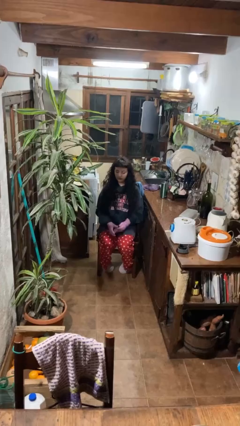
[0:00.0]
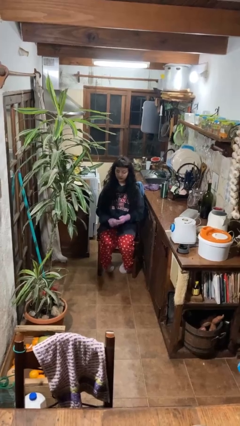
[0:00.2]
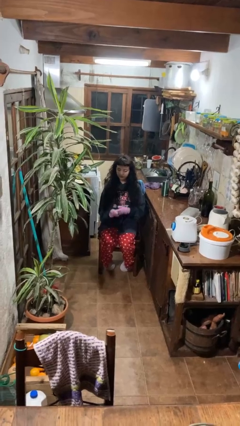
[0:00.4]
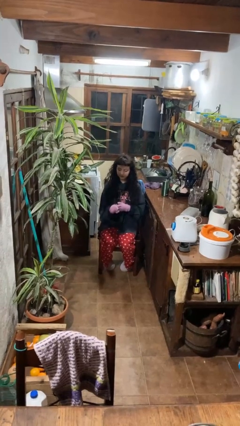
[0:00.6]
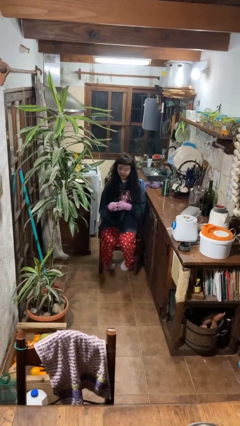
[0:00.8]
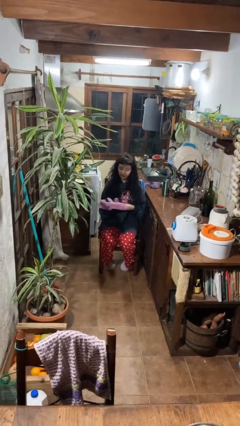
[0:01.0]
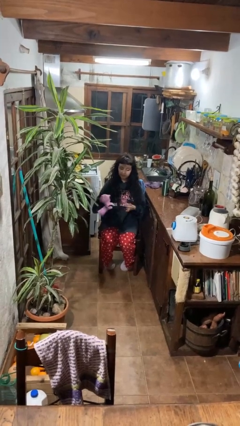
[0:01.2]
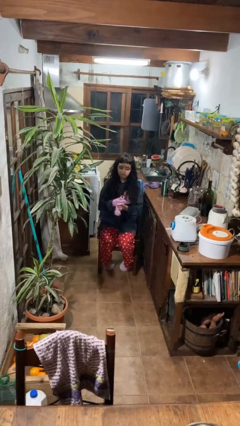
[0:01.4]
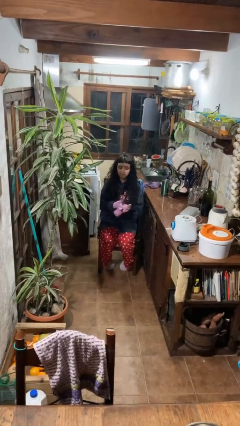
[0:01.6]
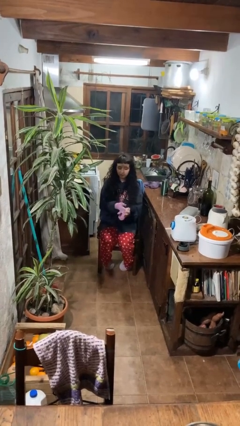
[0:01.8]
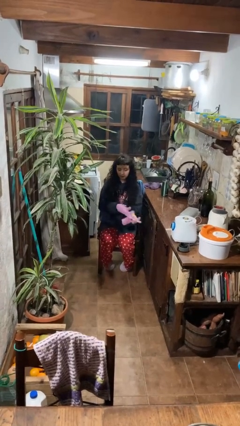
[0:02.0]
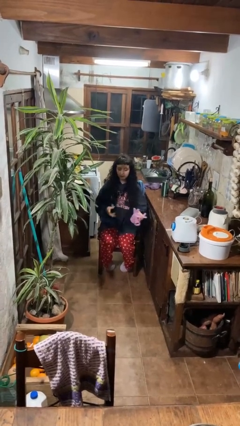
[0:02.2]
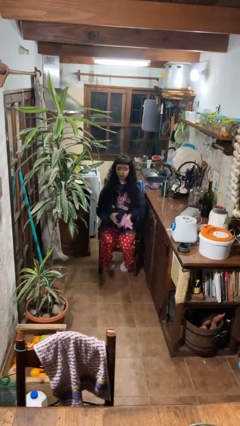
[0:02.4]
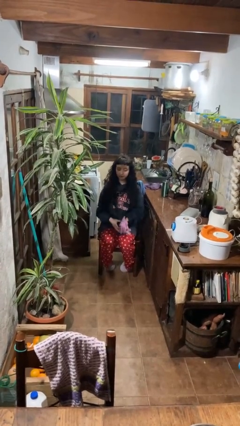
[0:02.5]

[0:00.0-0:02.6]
person takes off gloves

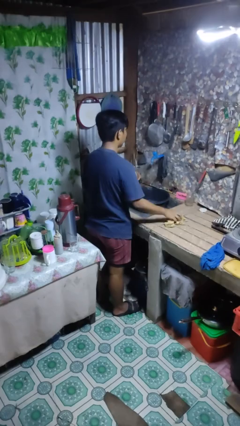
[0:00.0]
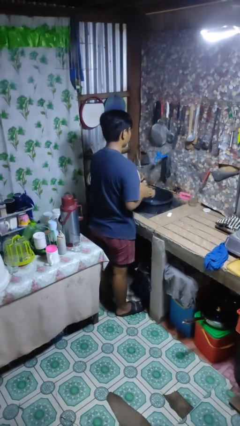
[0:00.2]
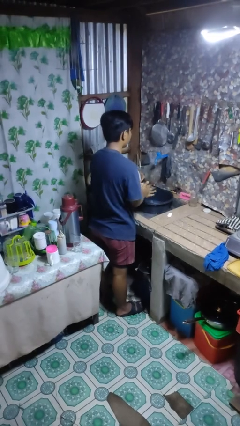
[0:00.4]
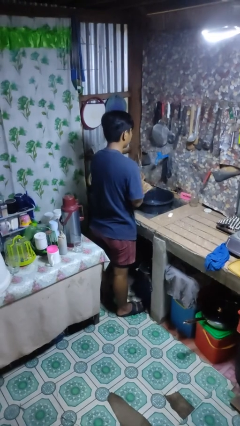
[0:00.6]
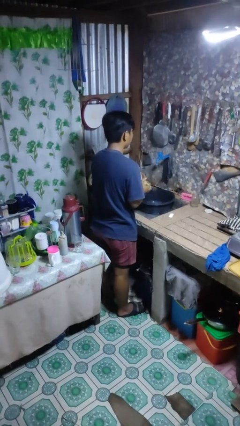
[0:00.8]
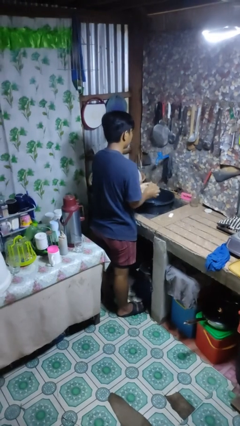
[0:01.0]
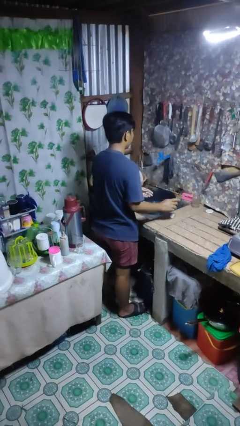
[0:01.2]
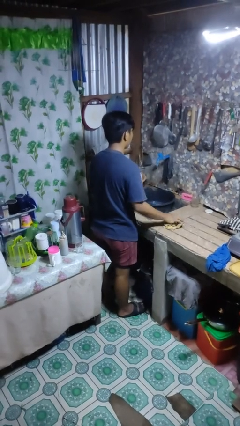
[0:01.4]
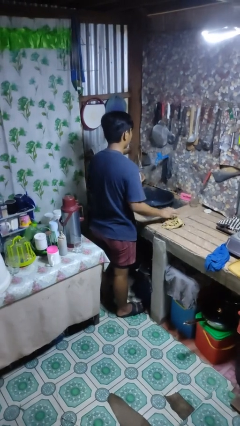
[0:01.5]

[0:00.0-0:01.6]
person dries hands with towel

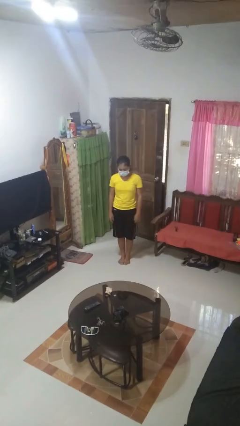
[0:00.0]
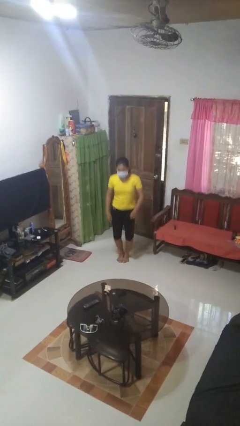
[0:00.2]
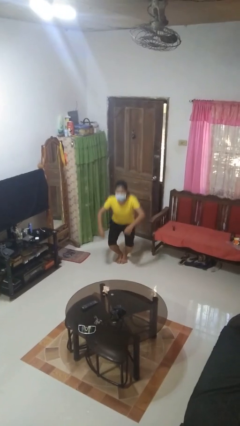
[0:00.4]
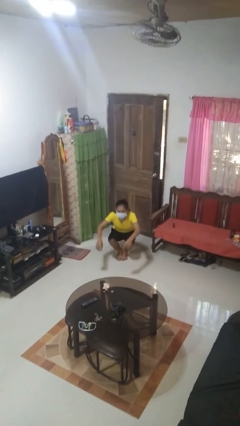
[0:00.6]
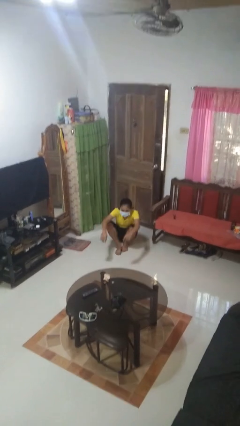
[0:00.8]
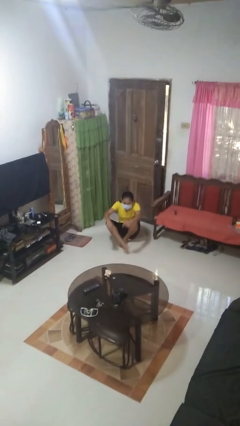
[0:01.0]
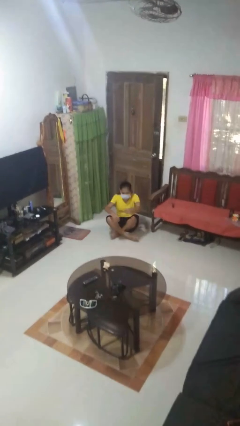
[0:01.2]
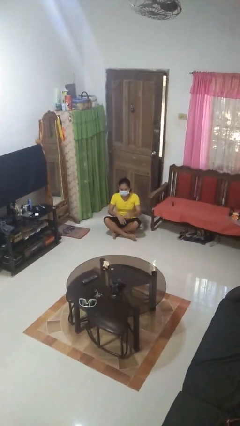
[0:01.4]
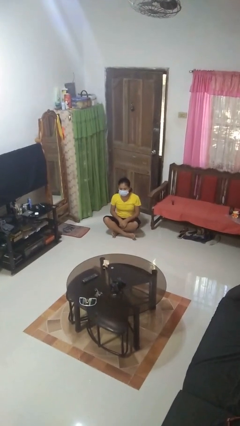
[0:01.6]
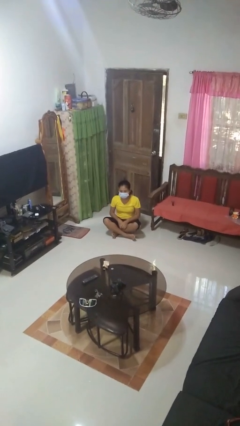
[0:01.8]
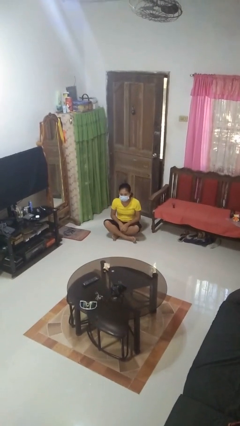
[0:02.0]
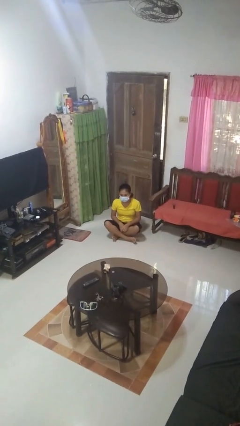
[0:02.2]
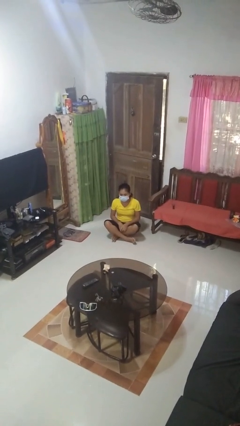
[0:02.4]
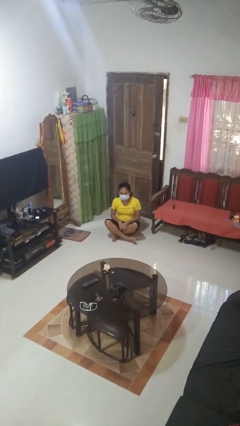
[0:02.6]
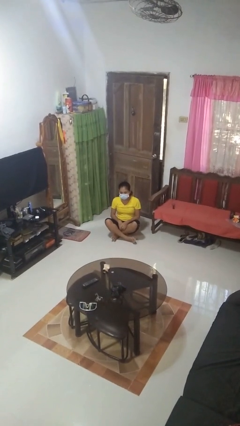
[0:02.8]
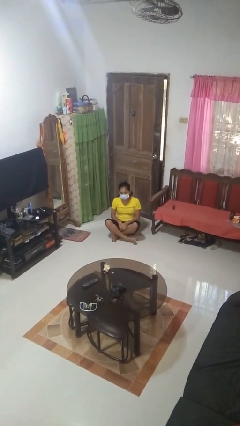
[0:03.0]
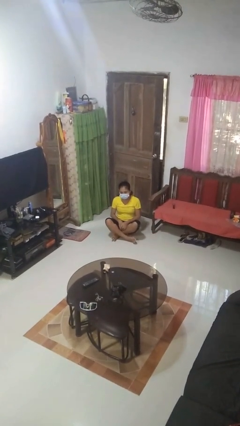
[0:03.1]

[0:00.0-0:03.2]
person sits crisscross

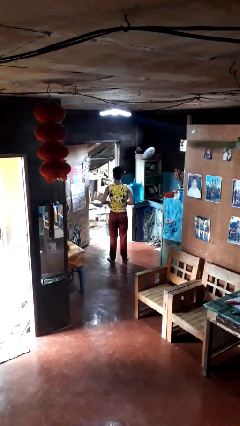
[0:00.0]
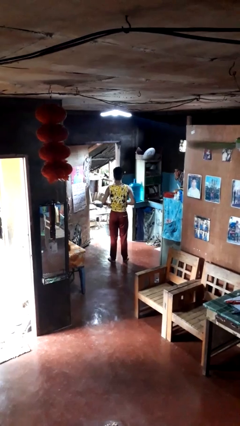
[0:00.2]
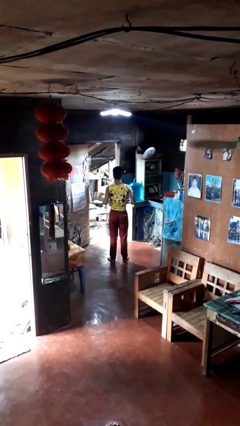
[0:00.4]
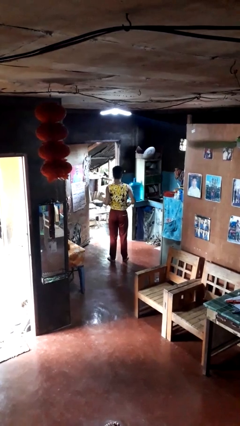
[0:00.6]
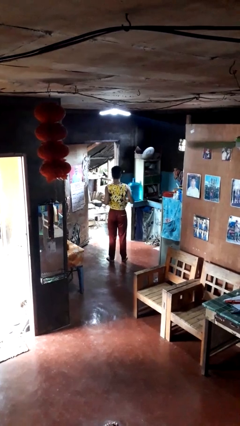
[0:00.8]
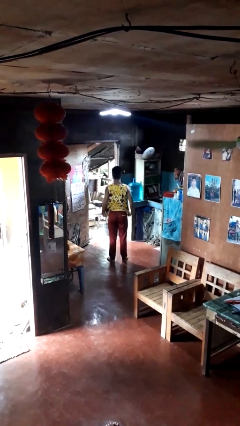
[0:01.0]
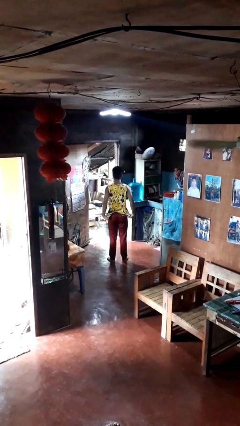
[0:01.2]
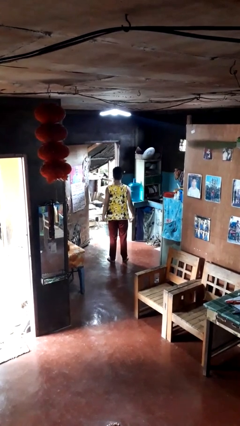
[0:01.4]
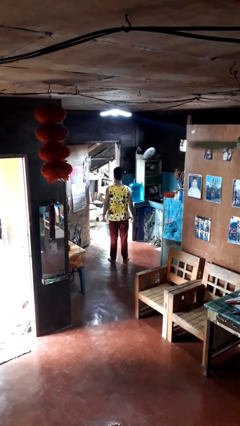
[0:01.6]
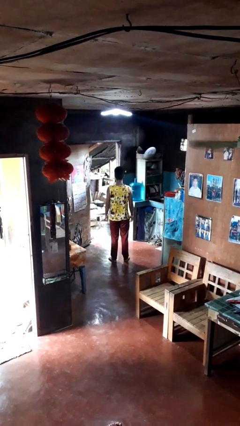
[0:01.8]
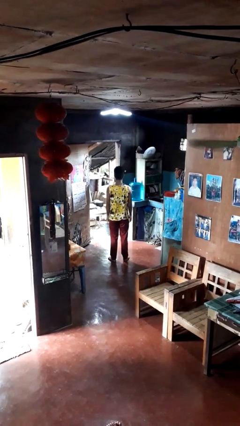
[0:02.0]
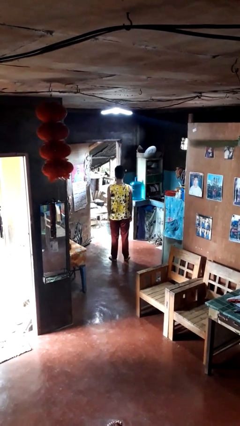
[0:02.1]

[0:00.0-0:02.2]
person untucks shirt

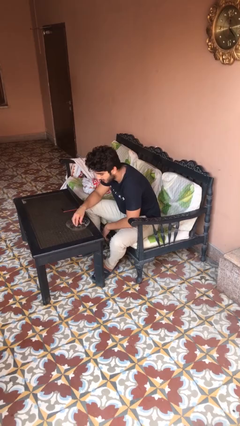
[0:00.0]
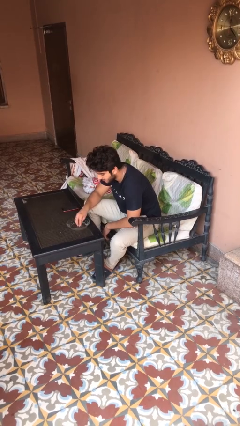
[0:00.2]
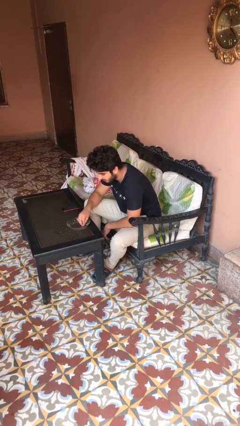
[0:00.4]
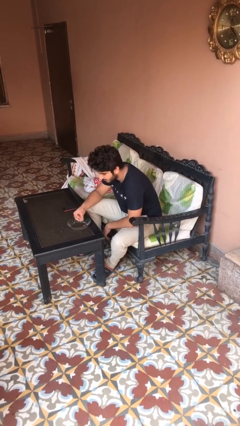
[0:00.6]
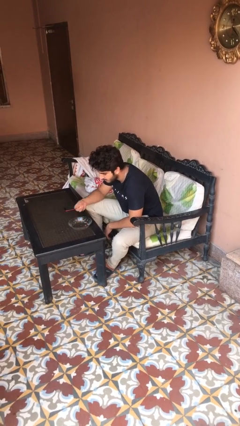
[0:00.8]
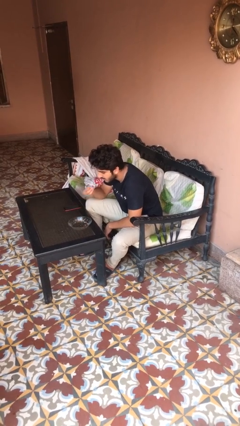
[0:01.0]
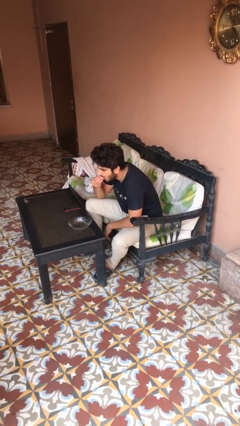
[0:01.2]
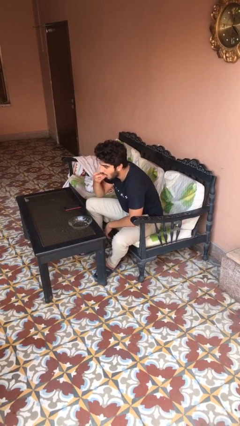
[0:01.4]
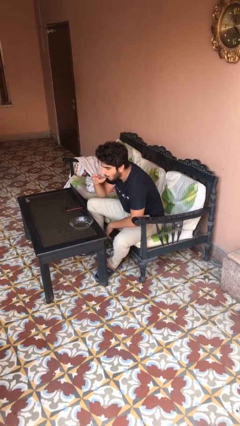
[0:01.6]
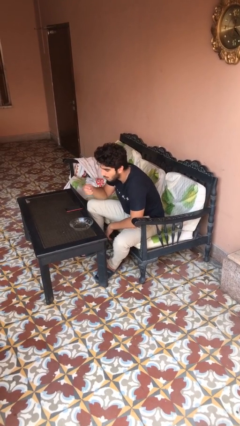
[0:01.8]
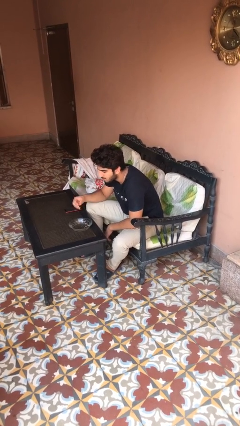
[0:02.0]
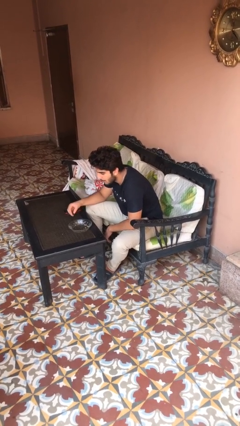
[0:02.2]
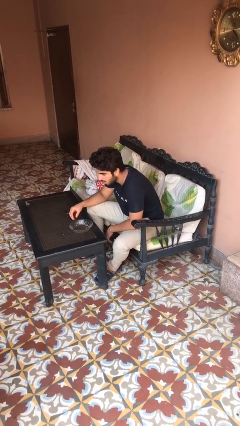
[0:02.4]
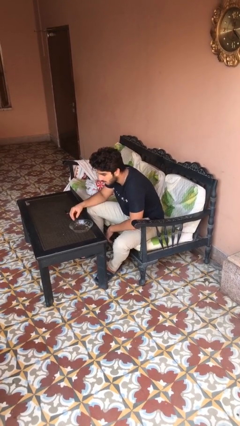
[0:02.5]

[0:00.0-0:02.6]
person eats with hands

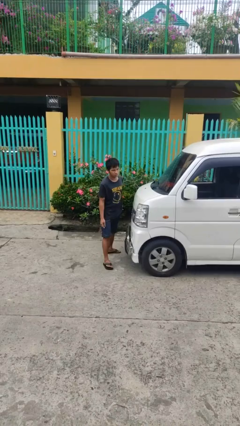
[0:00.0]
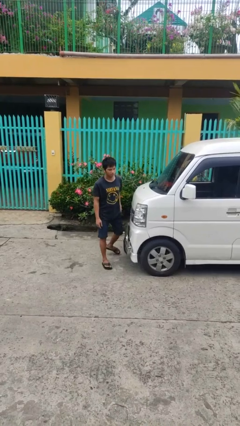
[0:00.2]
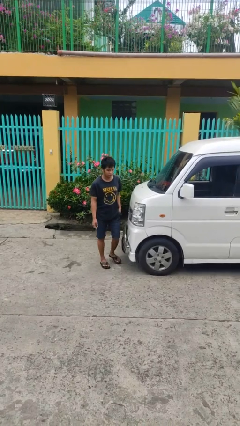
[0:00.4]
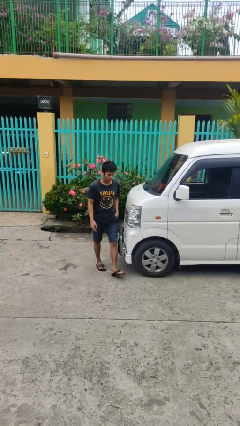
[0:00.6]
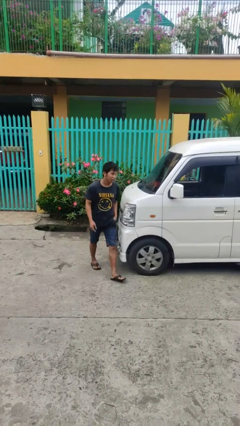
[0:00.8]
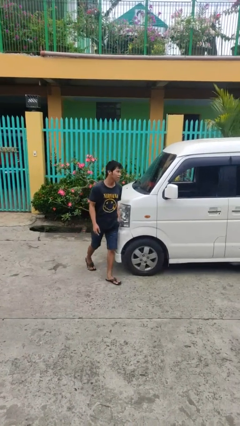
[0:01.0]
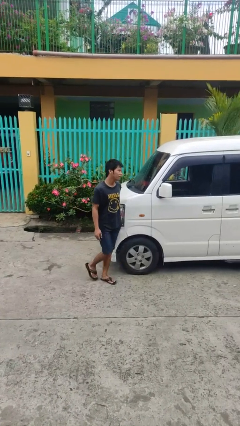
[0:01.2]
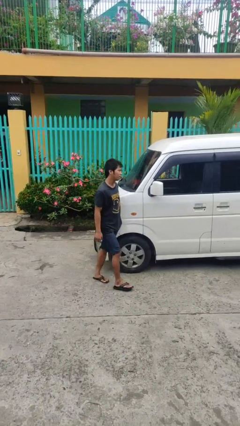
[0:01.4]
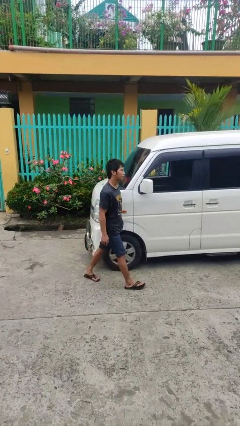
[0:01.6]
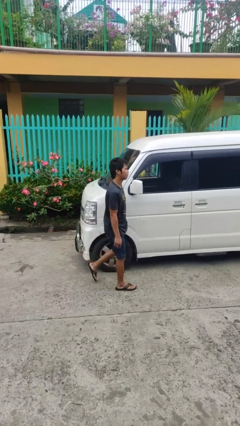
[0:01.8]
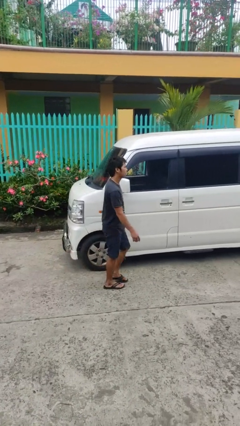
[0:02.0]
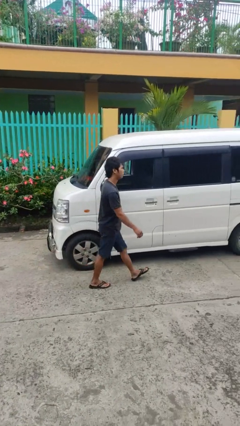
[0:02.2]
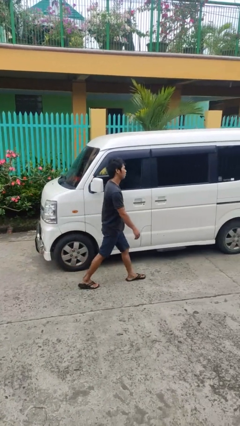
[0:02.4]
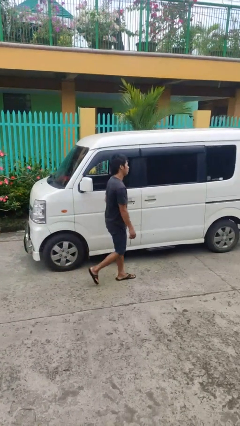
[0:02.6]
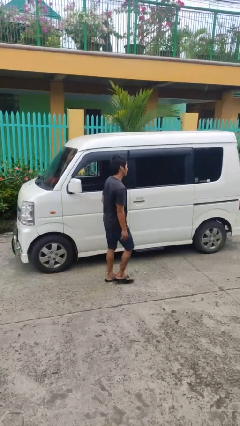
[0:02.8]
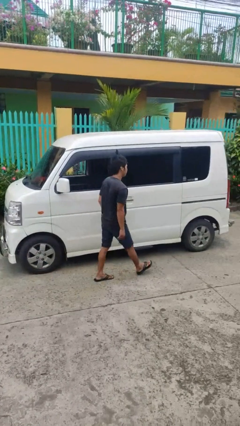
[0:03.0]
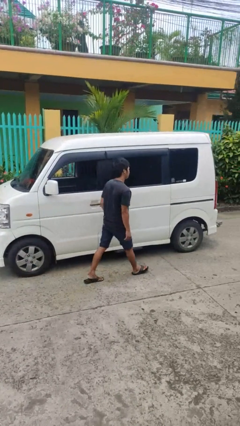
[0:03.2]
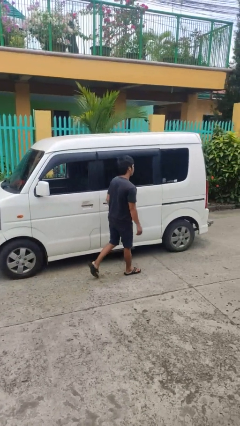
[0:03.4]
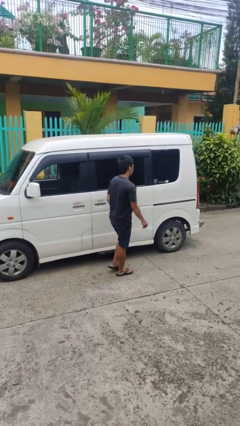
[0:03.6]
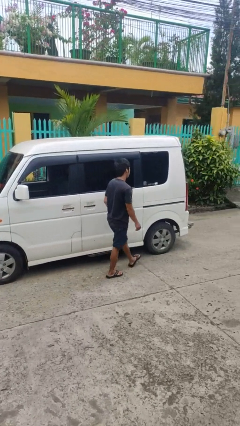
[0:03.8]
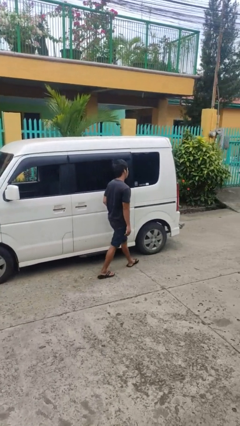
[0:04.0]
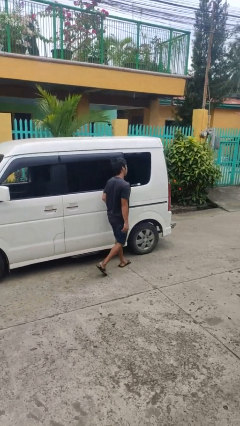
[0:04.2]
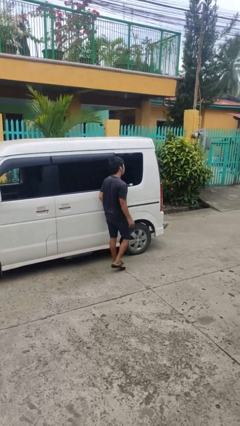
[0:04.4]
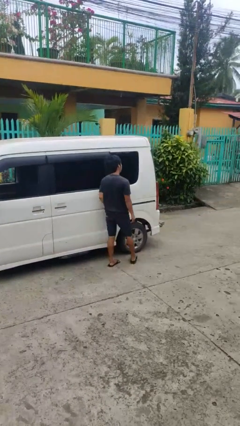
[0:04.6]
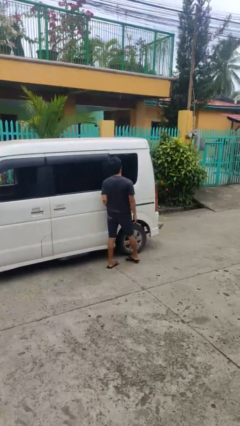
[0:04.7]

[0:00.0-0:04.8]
person walks around car

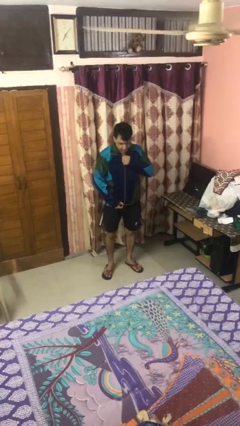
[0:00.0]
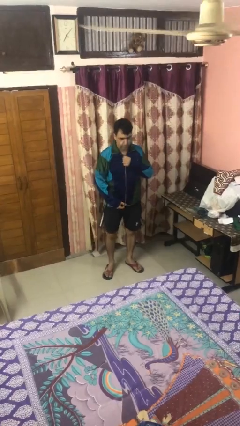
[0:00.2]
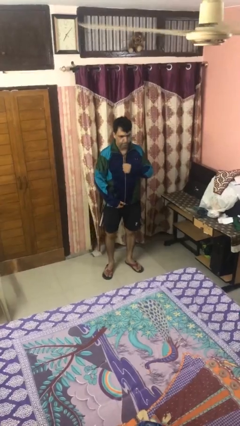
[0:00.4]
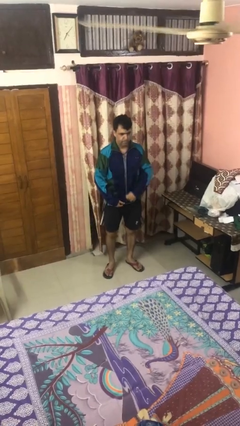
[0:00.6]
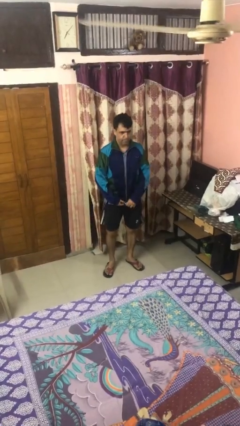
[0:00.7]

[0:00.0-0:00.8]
person unzips jacket
